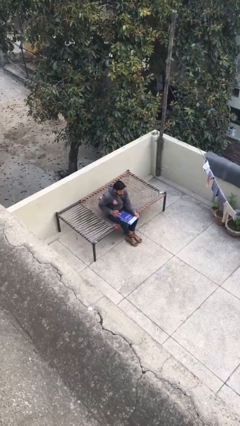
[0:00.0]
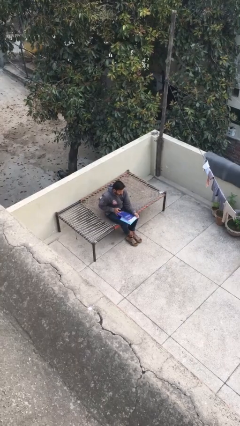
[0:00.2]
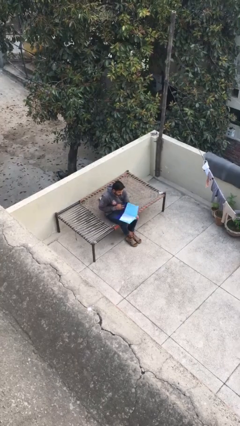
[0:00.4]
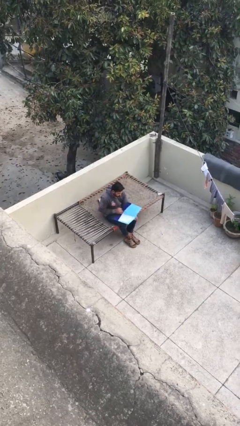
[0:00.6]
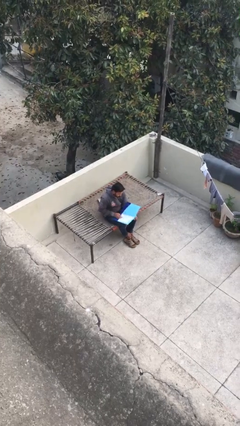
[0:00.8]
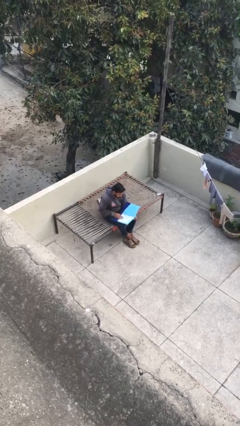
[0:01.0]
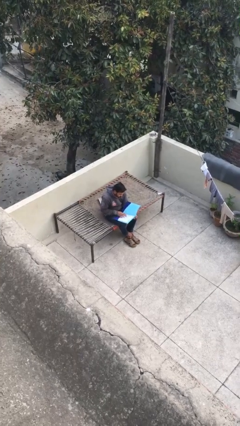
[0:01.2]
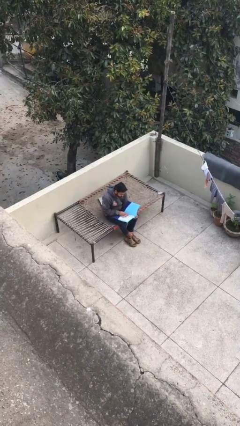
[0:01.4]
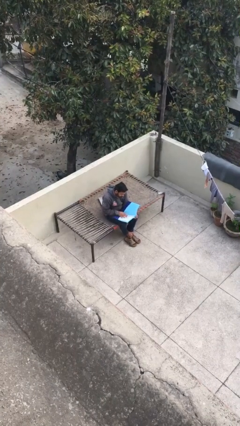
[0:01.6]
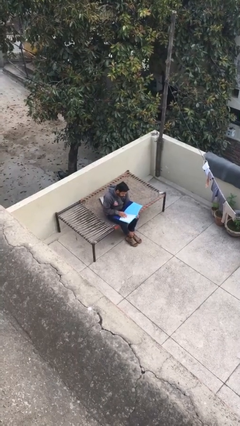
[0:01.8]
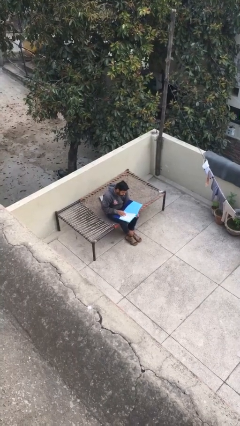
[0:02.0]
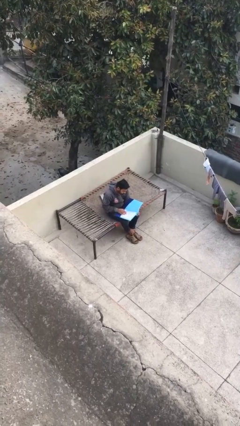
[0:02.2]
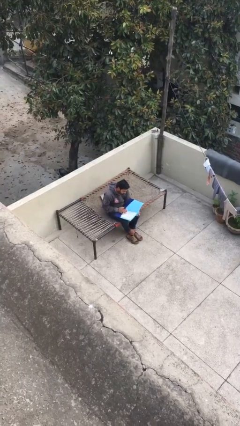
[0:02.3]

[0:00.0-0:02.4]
person reads document

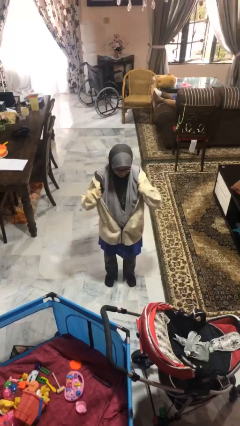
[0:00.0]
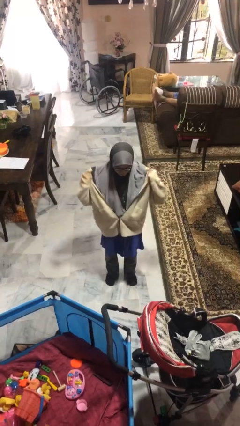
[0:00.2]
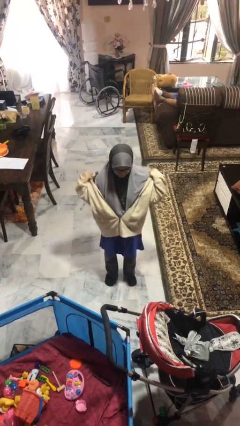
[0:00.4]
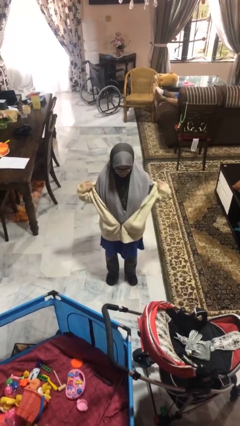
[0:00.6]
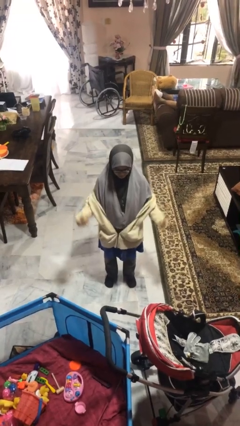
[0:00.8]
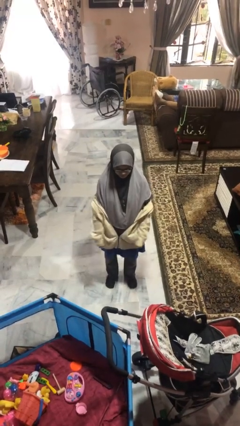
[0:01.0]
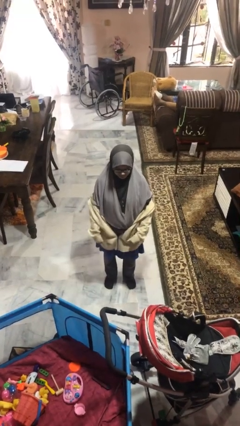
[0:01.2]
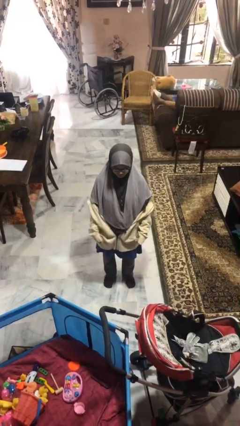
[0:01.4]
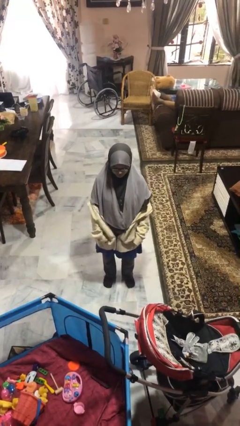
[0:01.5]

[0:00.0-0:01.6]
person takes off jacket

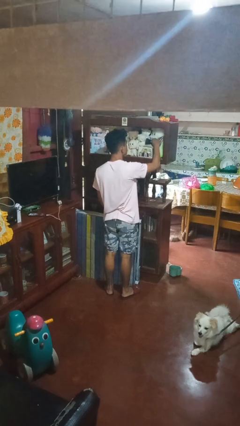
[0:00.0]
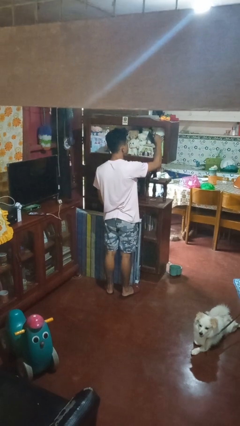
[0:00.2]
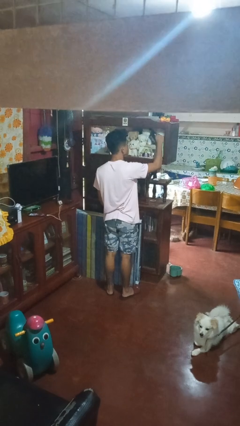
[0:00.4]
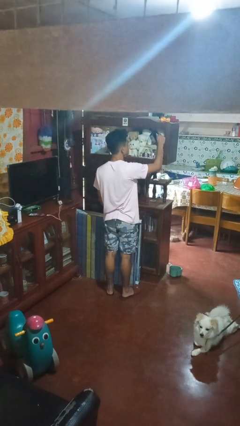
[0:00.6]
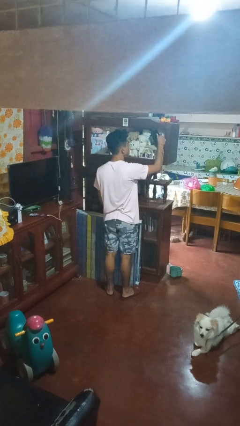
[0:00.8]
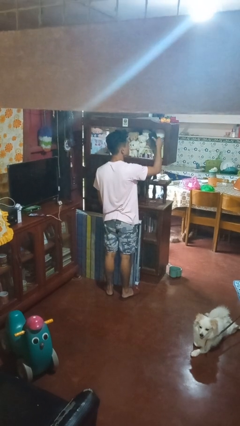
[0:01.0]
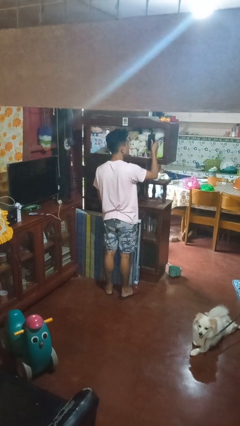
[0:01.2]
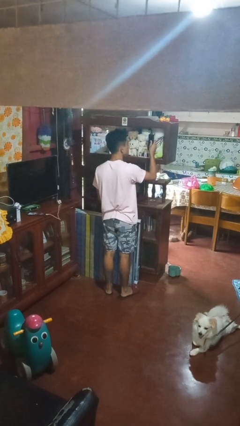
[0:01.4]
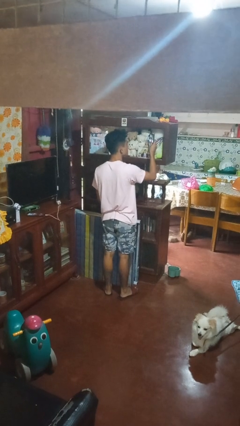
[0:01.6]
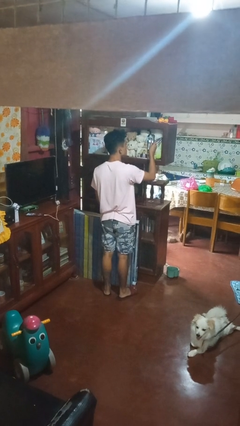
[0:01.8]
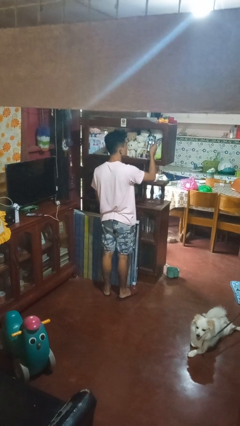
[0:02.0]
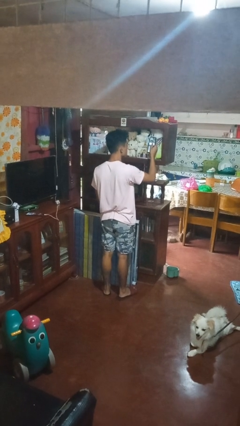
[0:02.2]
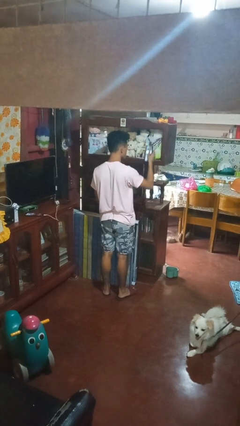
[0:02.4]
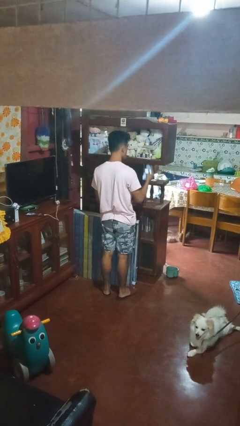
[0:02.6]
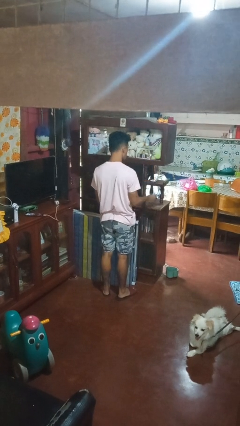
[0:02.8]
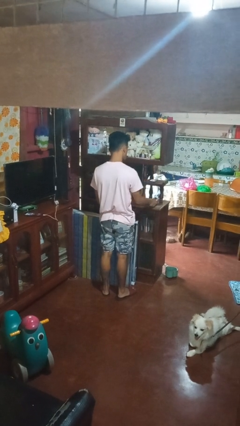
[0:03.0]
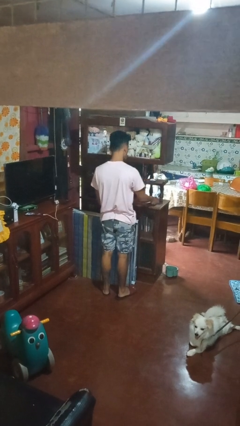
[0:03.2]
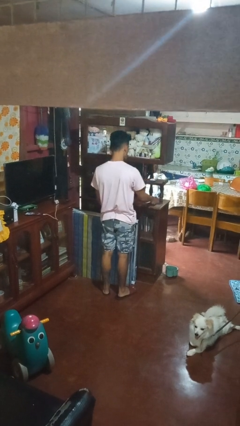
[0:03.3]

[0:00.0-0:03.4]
person picks up object from shelf

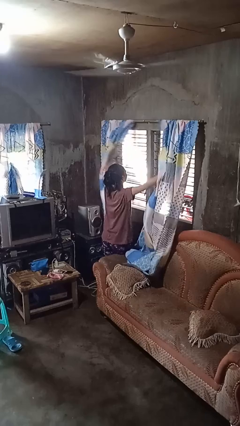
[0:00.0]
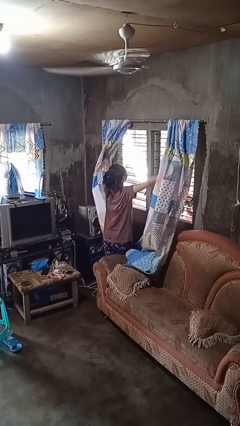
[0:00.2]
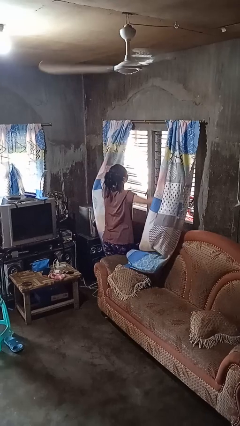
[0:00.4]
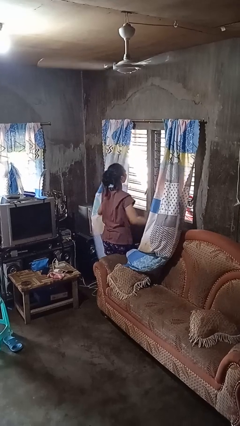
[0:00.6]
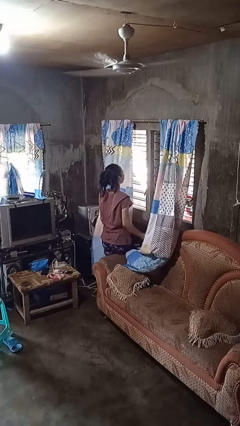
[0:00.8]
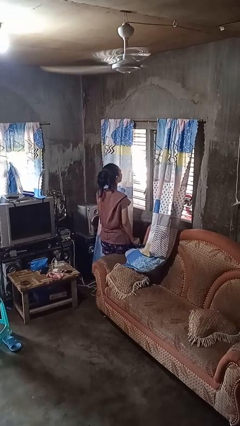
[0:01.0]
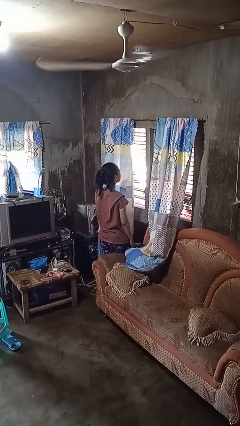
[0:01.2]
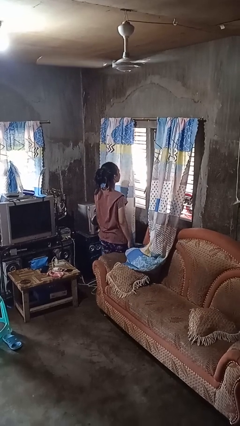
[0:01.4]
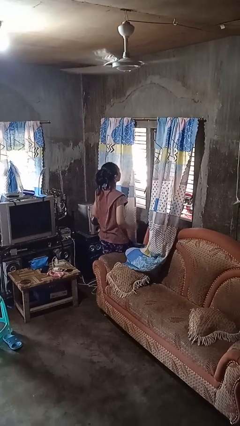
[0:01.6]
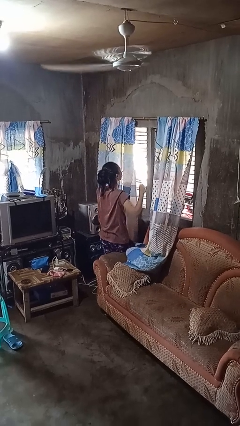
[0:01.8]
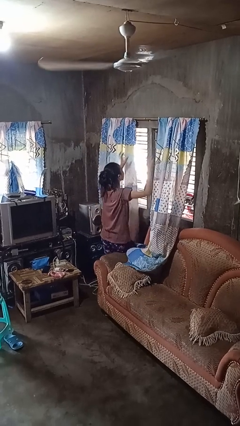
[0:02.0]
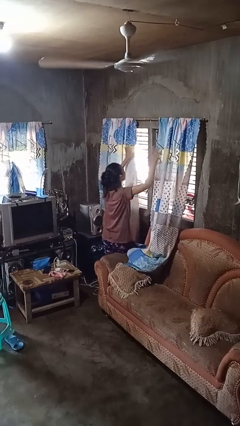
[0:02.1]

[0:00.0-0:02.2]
person opens curtains

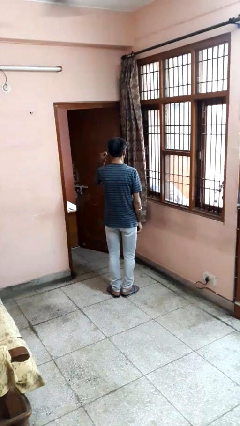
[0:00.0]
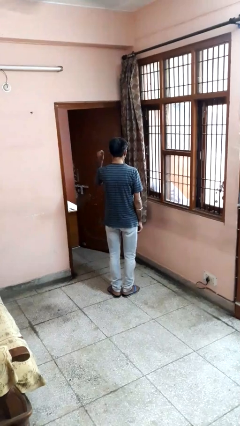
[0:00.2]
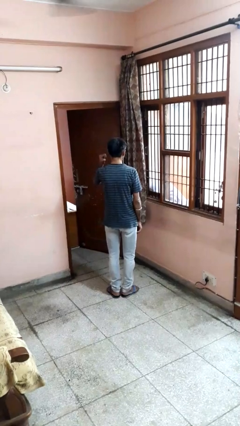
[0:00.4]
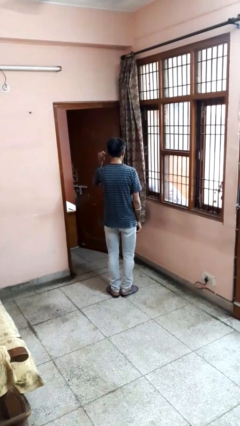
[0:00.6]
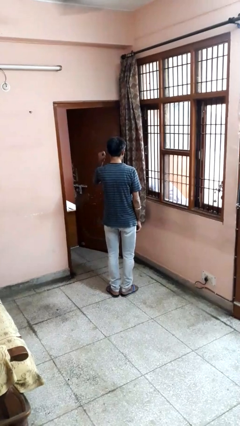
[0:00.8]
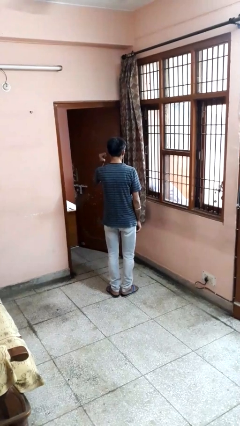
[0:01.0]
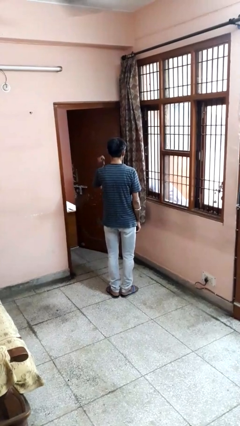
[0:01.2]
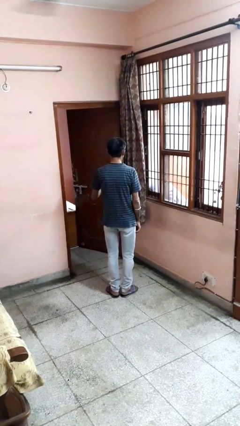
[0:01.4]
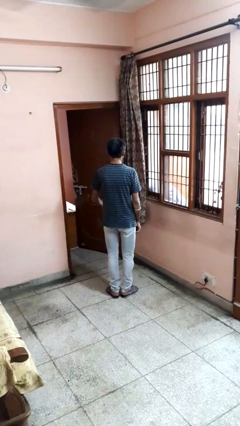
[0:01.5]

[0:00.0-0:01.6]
person gestures behind me

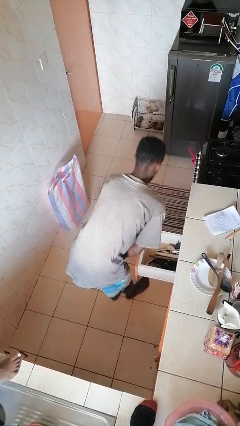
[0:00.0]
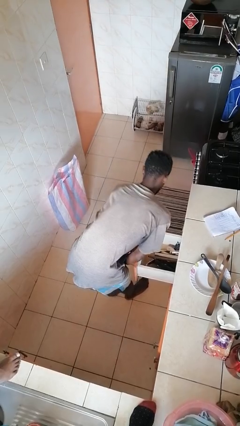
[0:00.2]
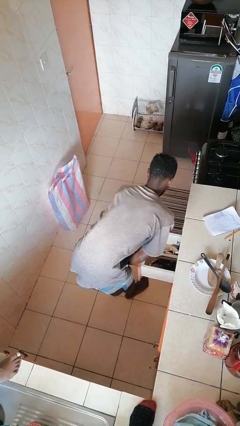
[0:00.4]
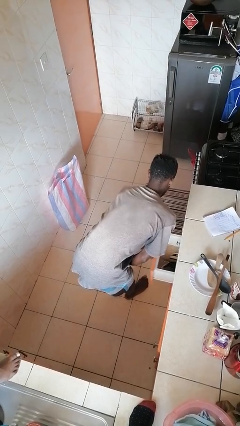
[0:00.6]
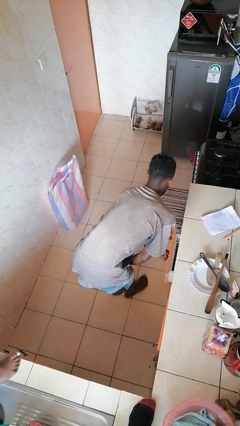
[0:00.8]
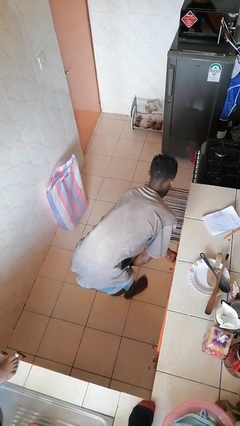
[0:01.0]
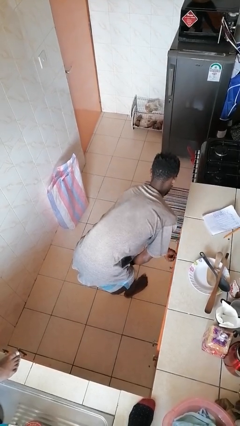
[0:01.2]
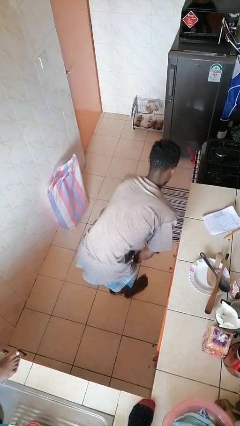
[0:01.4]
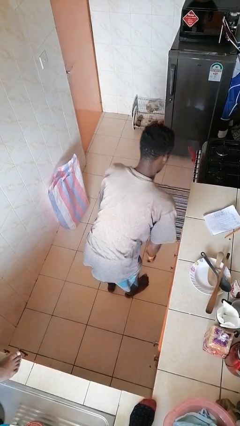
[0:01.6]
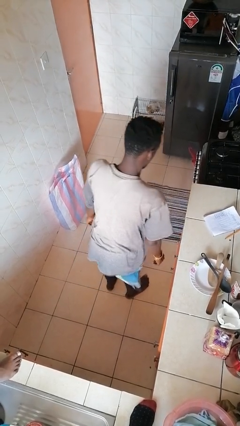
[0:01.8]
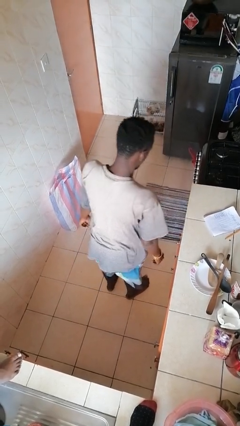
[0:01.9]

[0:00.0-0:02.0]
person closes kitchen drawer

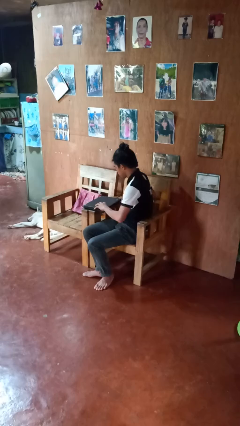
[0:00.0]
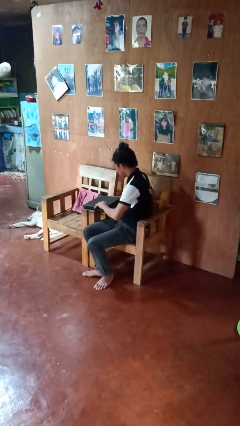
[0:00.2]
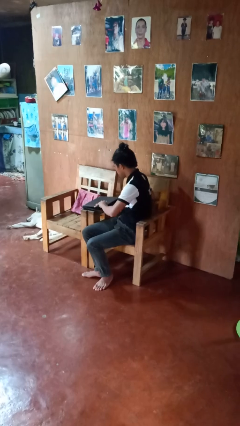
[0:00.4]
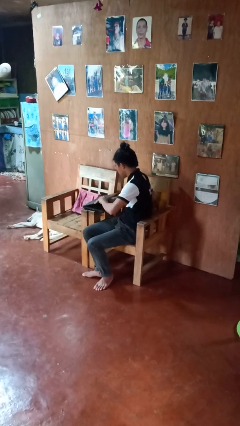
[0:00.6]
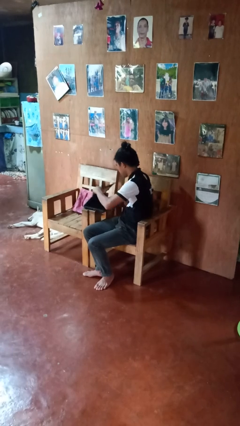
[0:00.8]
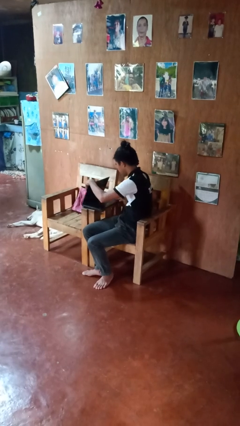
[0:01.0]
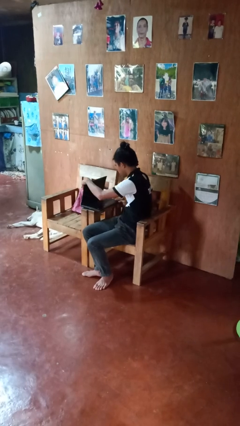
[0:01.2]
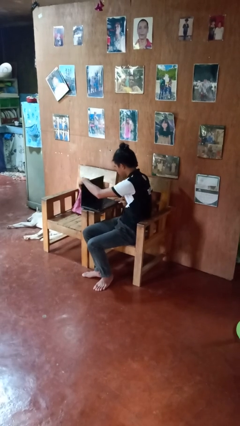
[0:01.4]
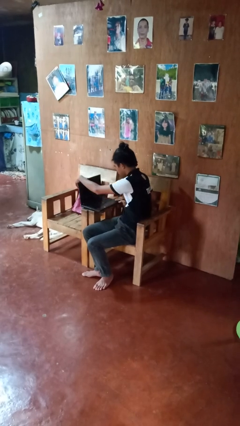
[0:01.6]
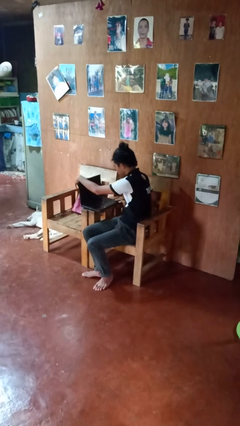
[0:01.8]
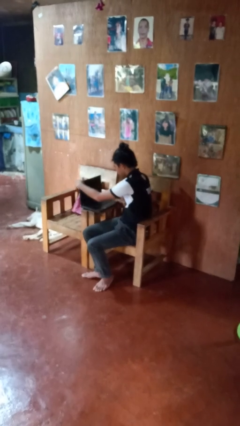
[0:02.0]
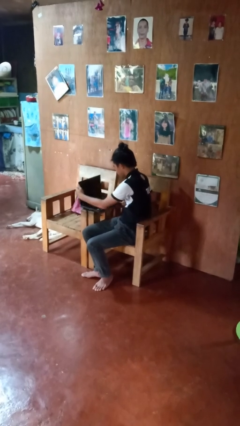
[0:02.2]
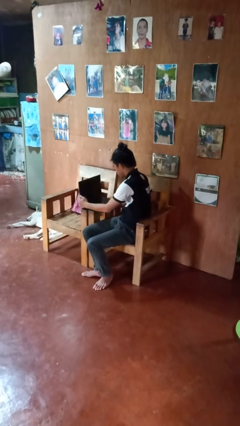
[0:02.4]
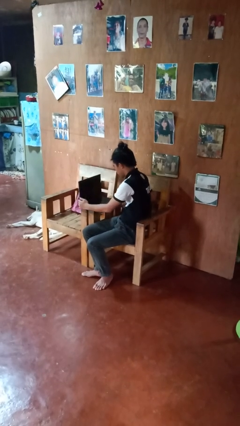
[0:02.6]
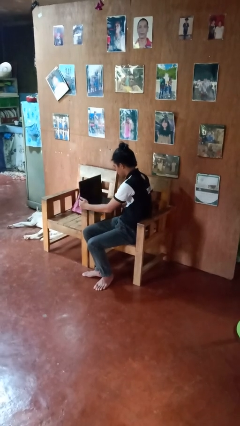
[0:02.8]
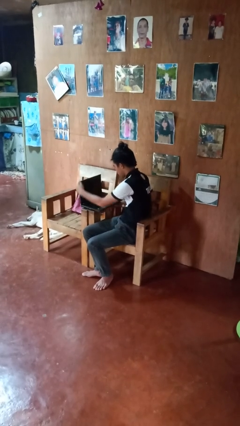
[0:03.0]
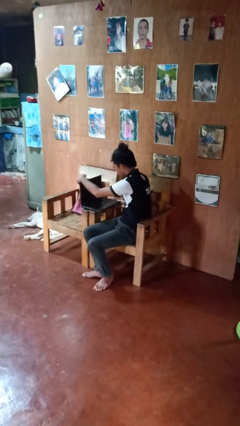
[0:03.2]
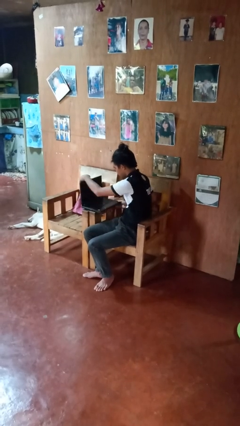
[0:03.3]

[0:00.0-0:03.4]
person opens laptop

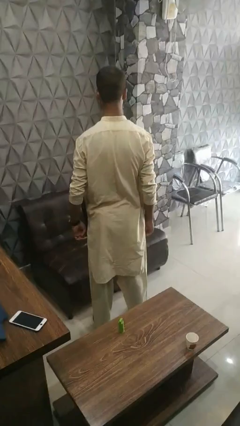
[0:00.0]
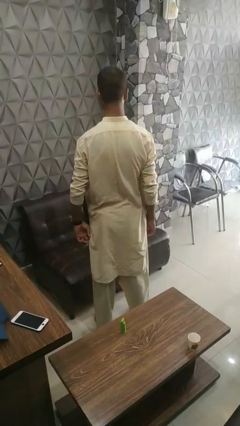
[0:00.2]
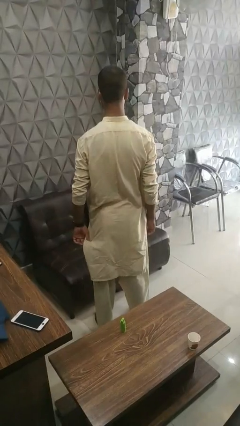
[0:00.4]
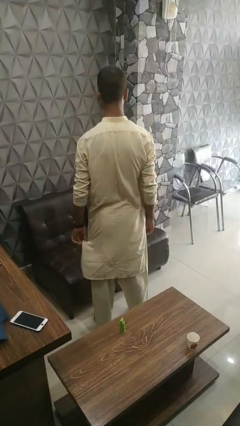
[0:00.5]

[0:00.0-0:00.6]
person searches in couch
